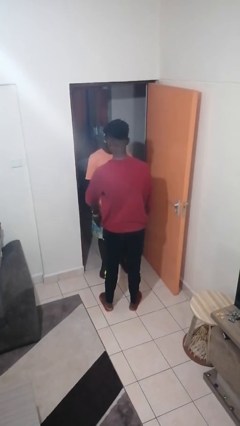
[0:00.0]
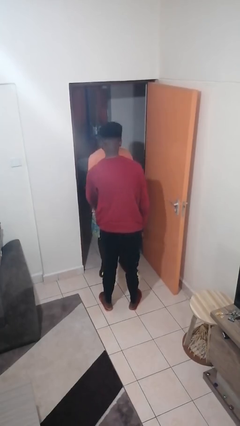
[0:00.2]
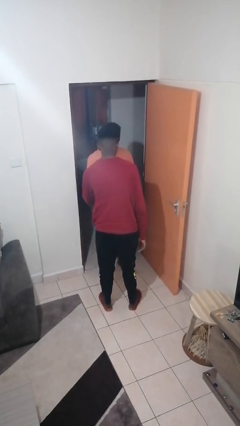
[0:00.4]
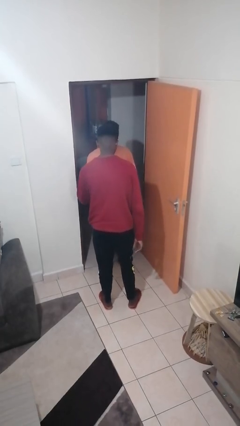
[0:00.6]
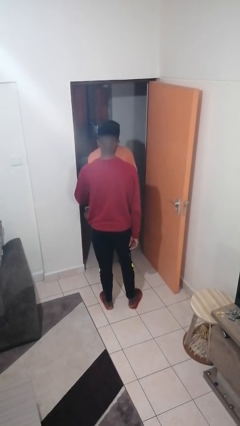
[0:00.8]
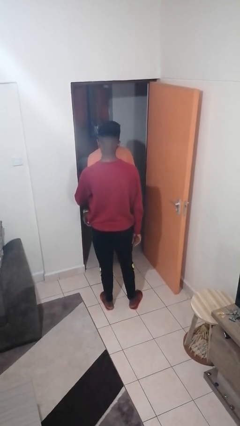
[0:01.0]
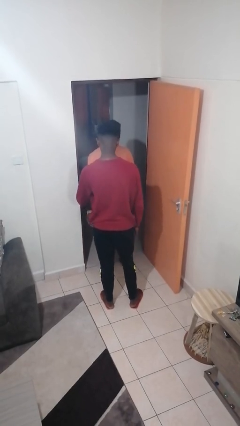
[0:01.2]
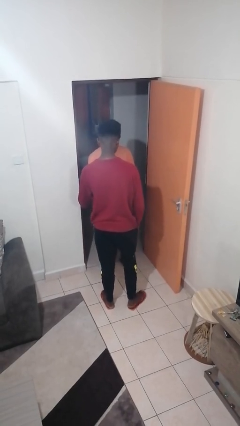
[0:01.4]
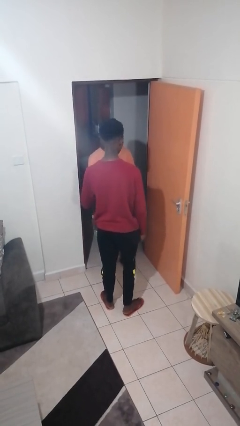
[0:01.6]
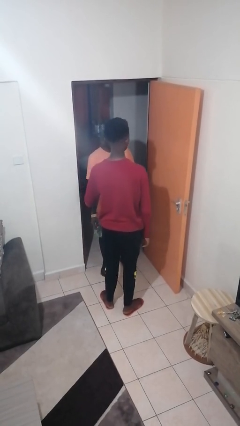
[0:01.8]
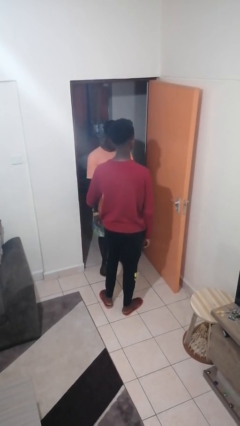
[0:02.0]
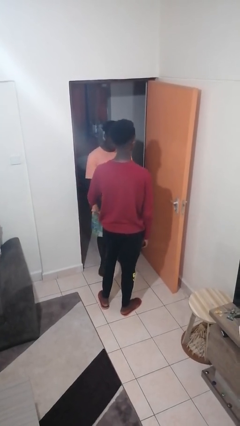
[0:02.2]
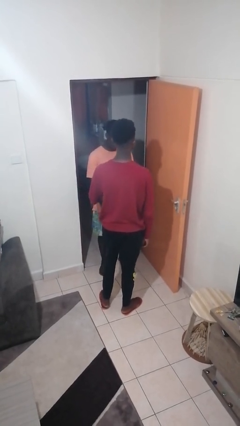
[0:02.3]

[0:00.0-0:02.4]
person grabs person by forearm

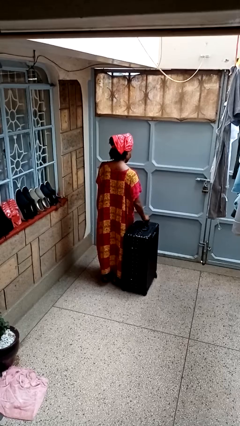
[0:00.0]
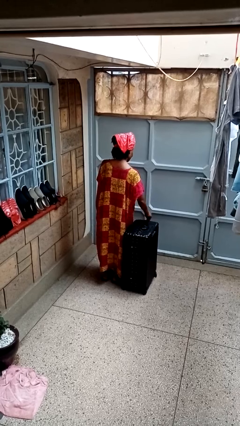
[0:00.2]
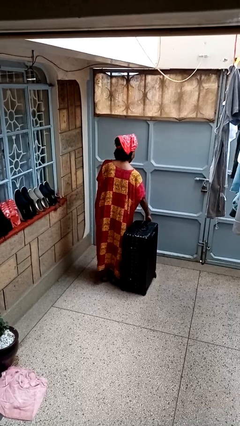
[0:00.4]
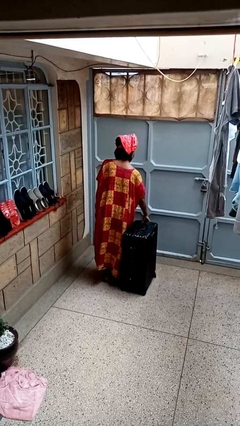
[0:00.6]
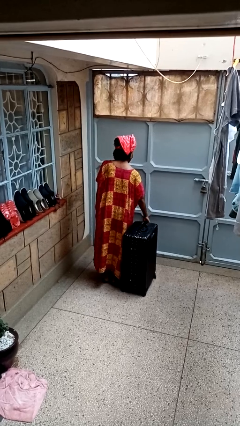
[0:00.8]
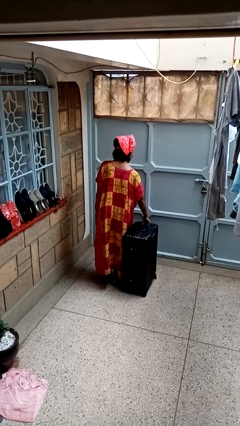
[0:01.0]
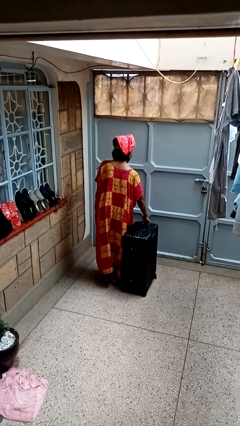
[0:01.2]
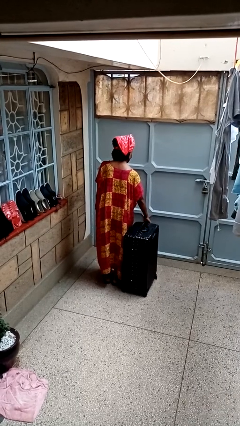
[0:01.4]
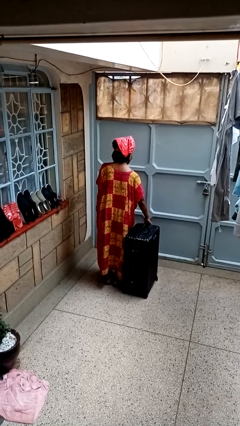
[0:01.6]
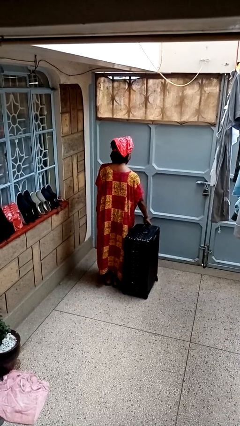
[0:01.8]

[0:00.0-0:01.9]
person closes suitcase

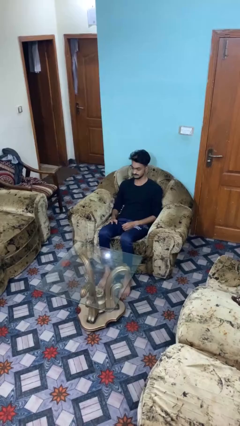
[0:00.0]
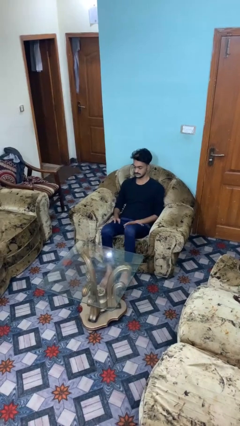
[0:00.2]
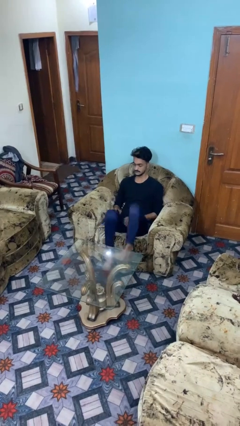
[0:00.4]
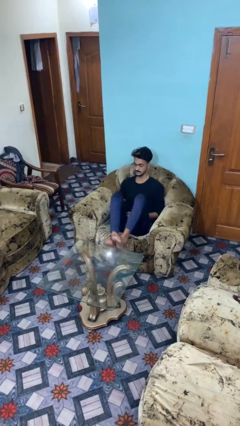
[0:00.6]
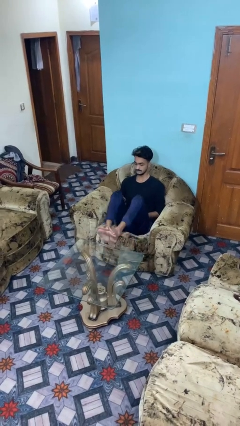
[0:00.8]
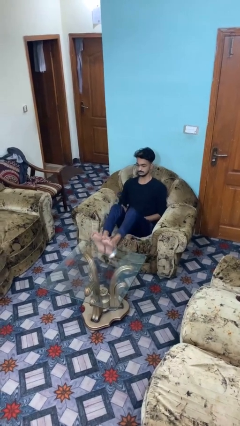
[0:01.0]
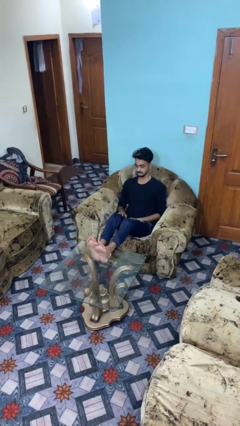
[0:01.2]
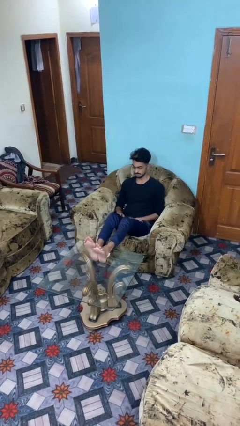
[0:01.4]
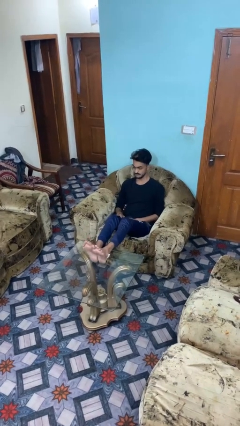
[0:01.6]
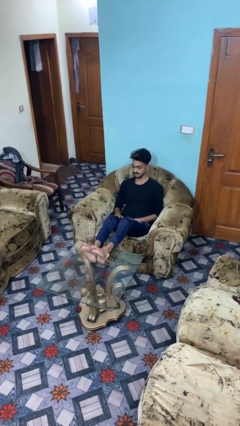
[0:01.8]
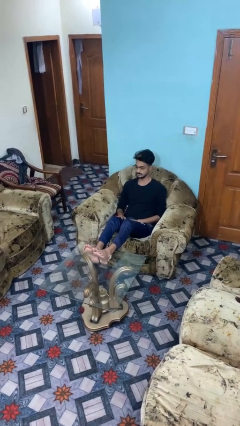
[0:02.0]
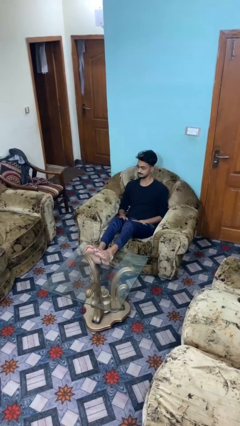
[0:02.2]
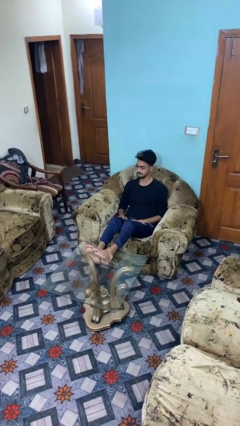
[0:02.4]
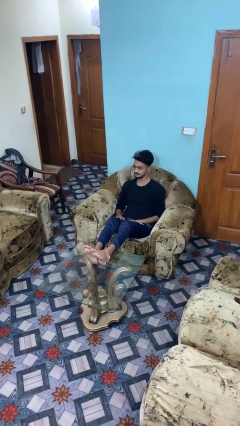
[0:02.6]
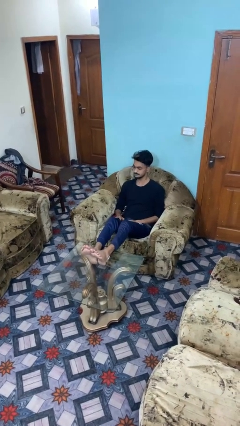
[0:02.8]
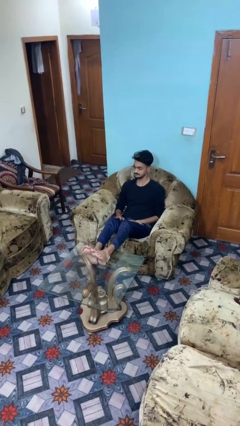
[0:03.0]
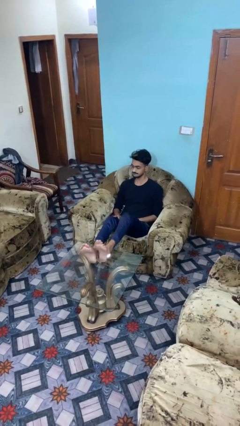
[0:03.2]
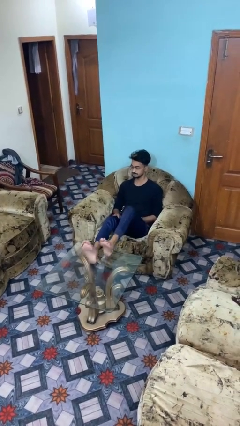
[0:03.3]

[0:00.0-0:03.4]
person puts feet up

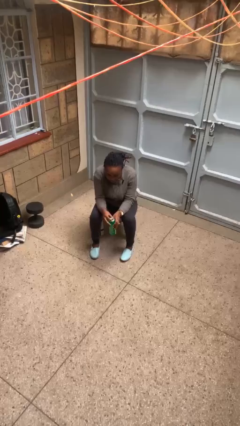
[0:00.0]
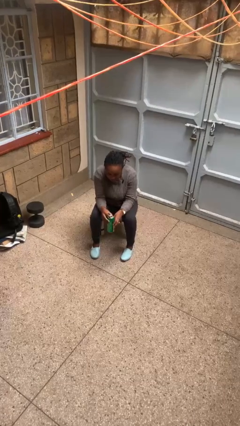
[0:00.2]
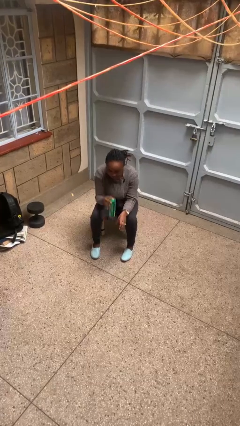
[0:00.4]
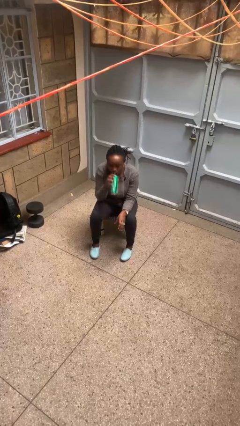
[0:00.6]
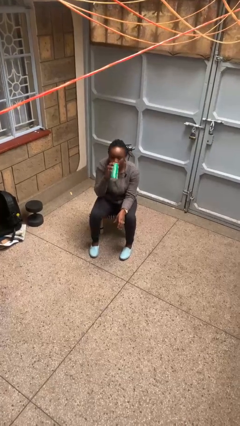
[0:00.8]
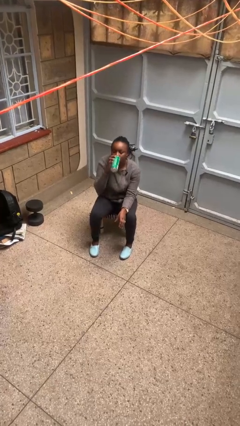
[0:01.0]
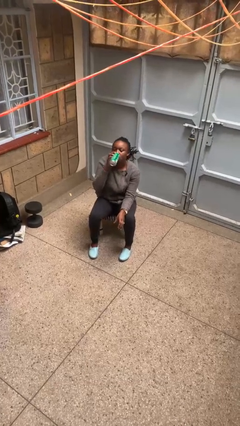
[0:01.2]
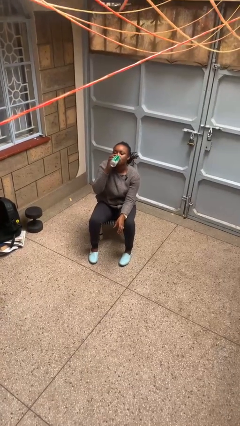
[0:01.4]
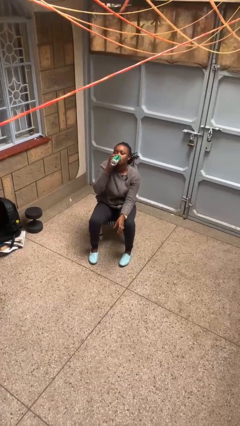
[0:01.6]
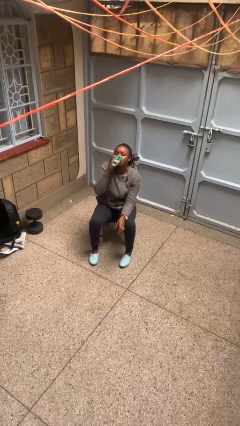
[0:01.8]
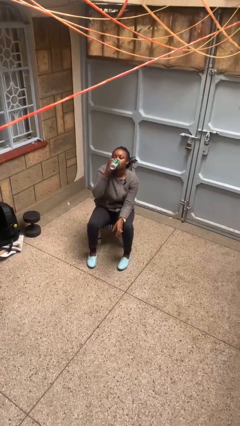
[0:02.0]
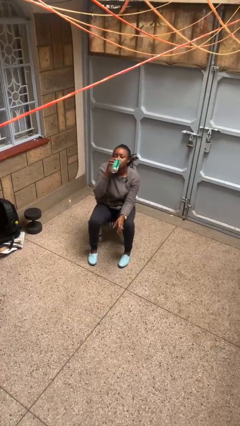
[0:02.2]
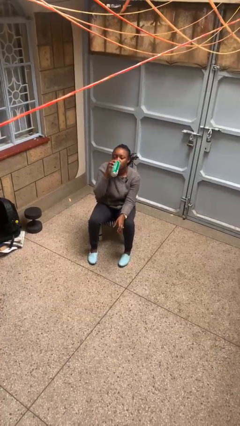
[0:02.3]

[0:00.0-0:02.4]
person drinks from beverage can

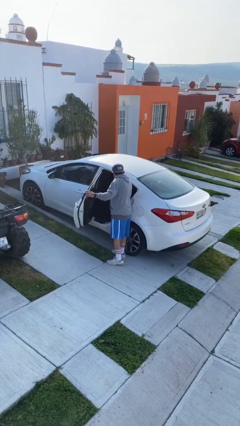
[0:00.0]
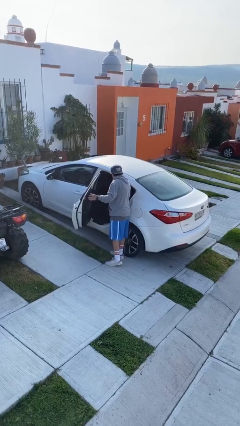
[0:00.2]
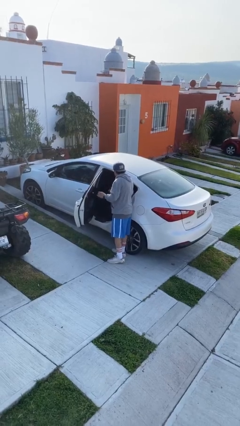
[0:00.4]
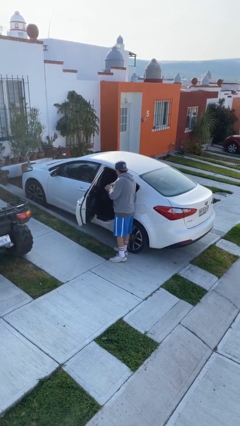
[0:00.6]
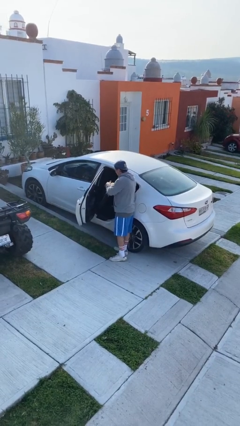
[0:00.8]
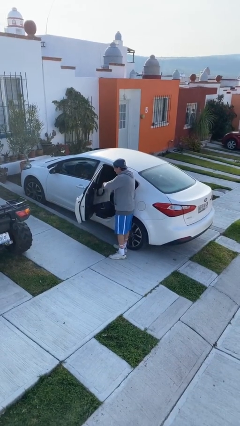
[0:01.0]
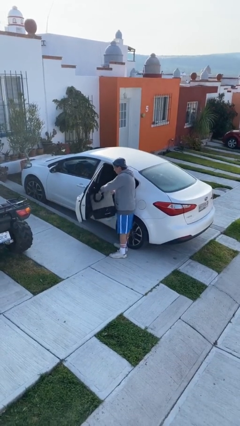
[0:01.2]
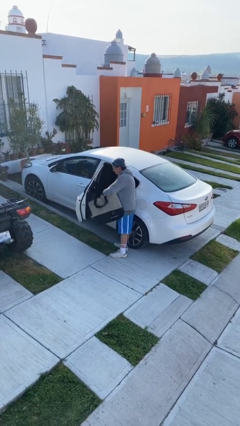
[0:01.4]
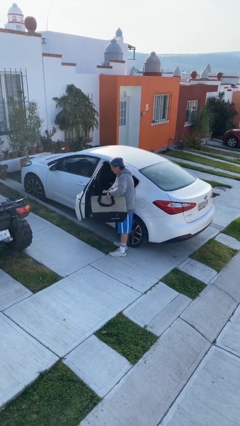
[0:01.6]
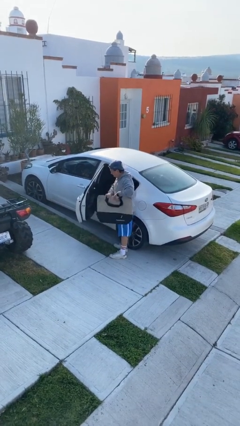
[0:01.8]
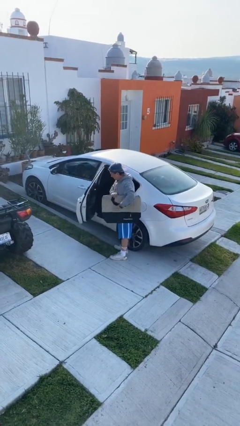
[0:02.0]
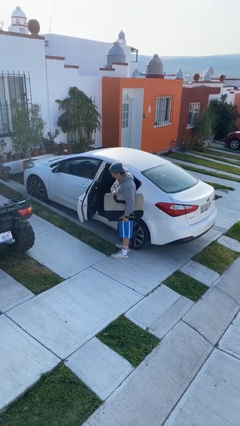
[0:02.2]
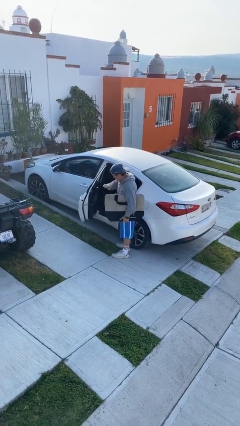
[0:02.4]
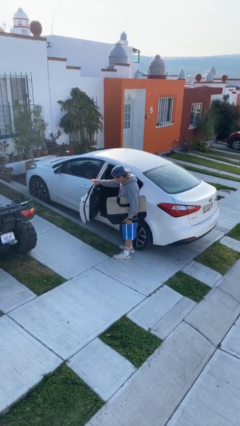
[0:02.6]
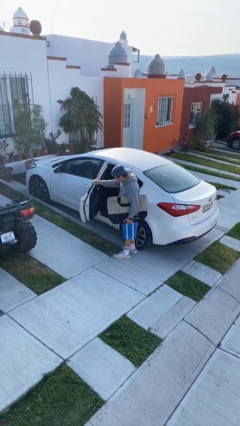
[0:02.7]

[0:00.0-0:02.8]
person unloads car

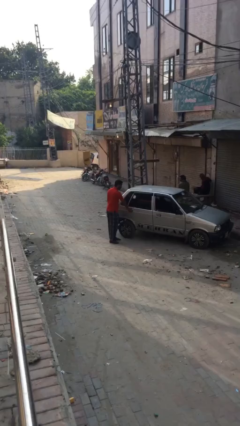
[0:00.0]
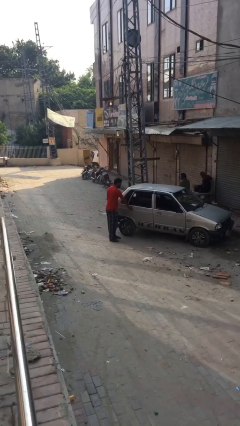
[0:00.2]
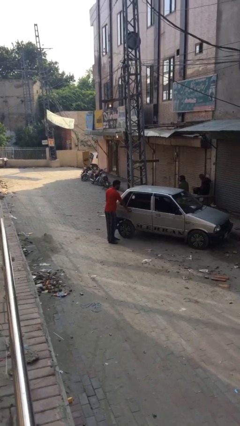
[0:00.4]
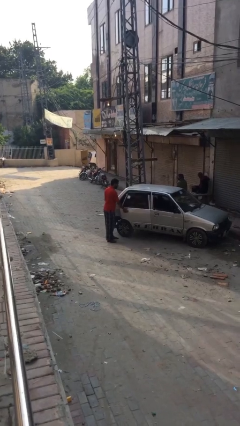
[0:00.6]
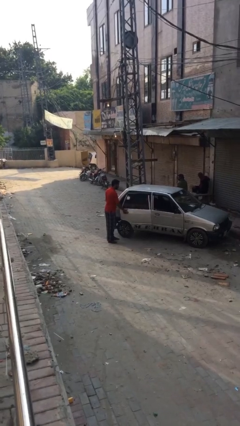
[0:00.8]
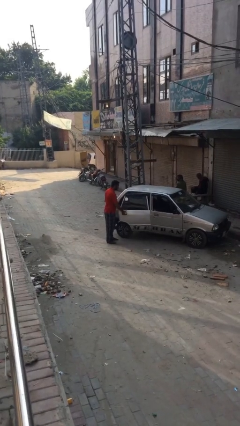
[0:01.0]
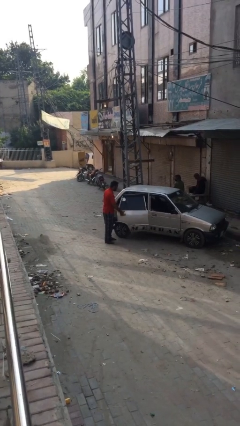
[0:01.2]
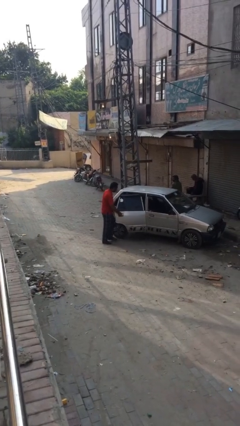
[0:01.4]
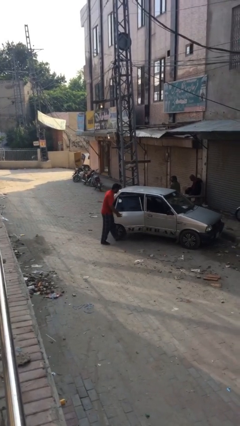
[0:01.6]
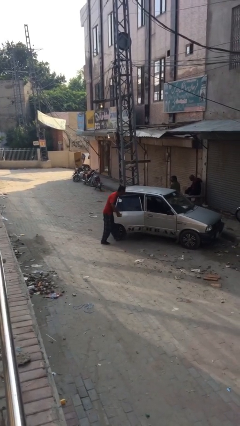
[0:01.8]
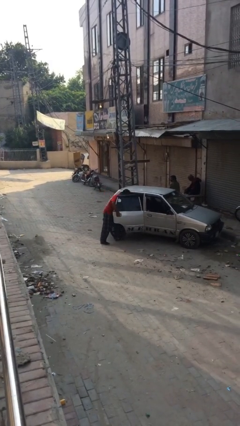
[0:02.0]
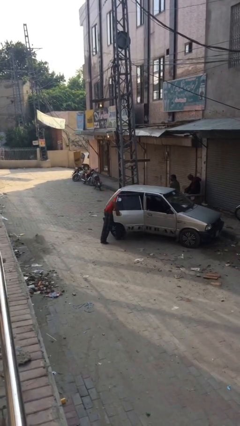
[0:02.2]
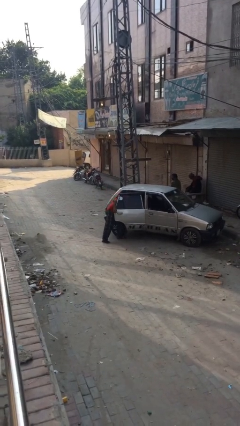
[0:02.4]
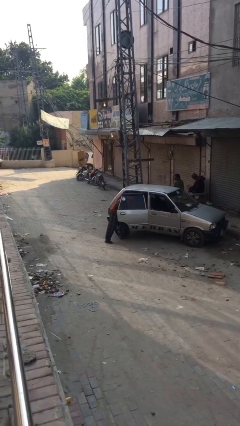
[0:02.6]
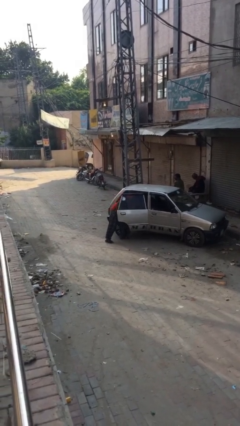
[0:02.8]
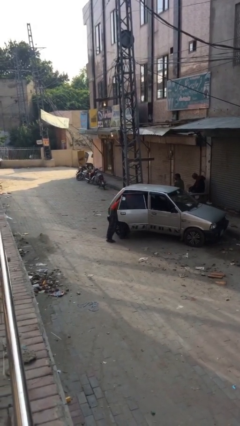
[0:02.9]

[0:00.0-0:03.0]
person opens car door

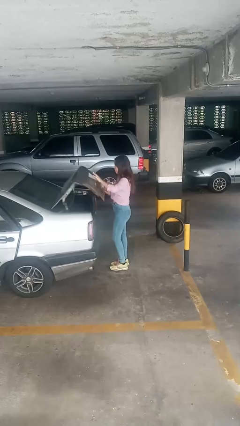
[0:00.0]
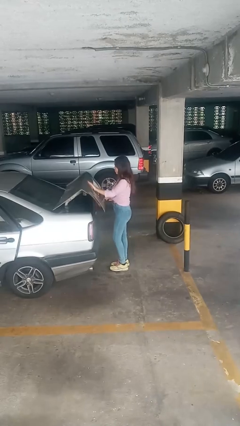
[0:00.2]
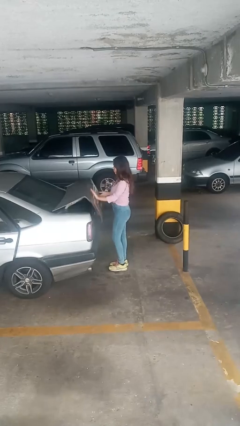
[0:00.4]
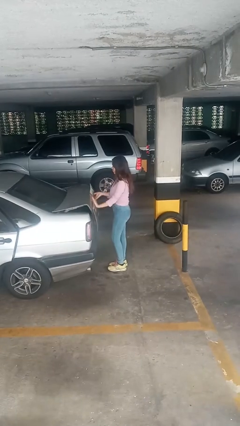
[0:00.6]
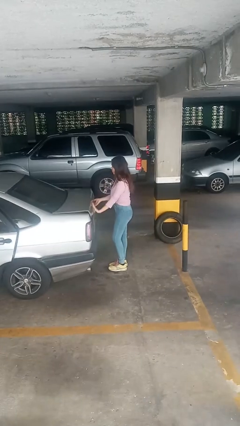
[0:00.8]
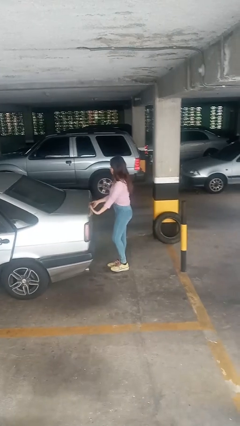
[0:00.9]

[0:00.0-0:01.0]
person closes car trunk

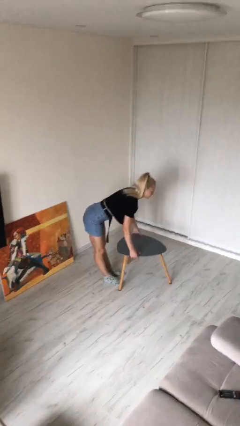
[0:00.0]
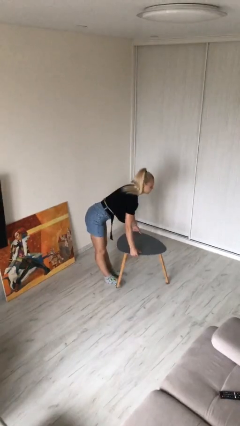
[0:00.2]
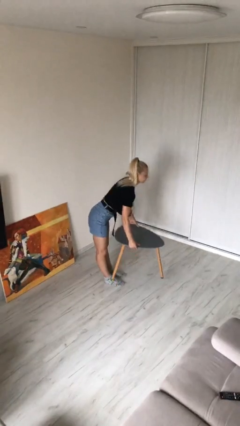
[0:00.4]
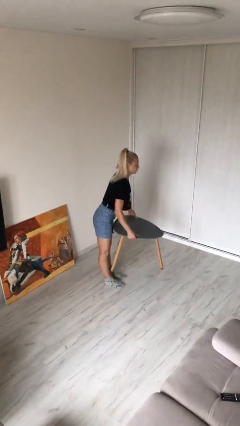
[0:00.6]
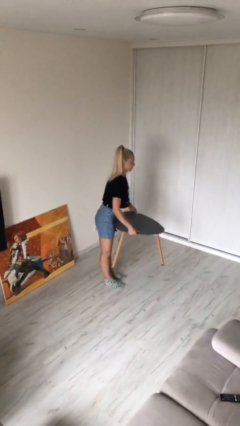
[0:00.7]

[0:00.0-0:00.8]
person picks up object from floor
